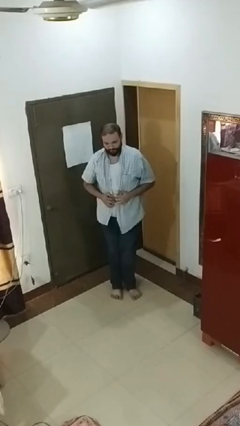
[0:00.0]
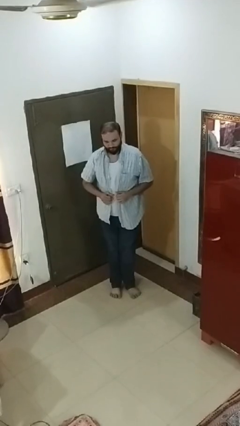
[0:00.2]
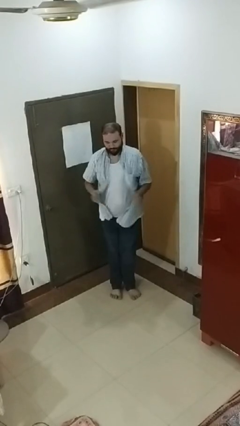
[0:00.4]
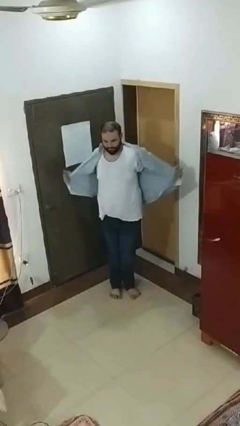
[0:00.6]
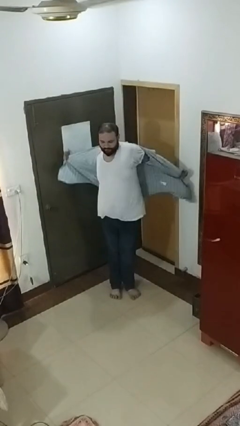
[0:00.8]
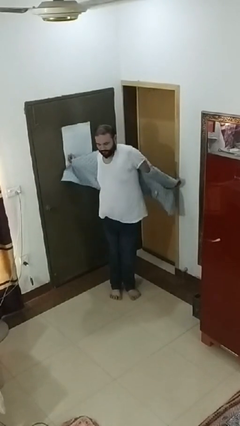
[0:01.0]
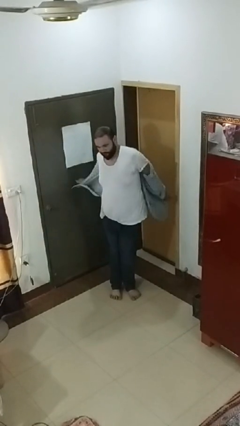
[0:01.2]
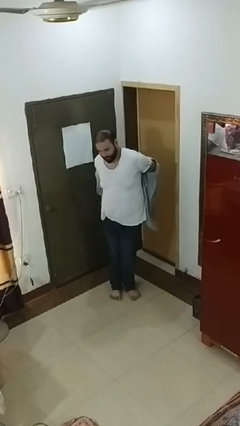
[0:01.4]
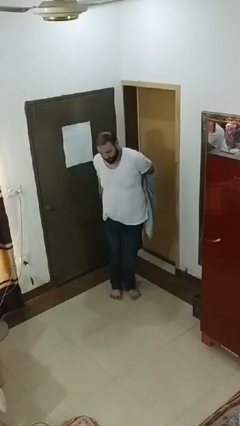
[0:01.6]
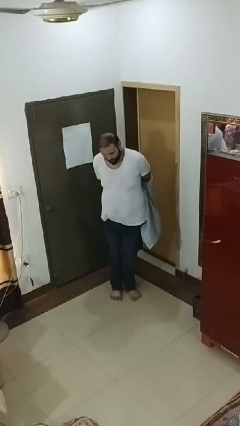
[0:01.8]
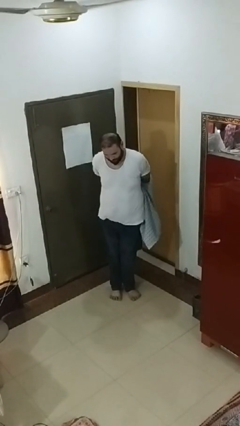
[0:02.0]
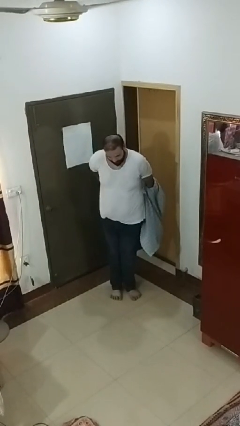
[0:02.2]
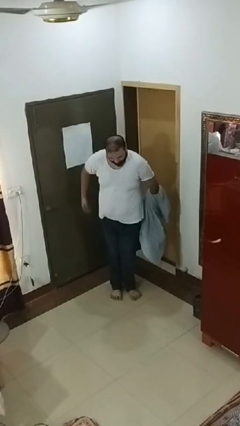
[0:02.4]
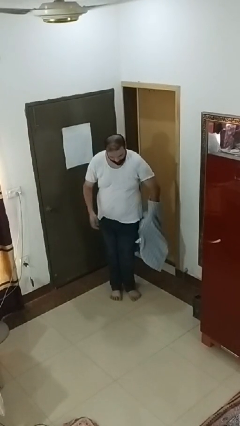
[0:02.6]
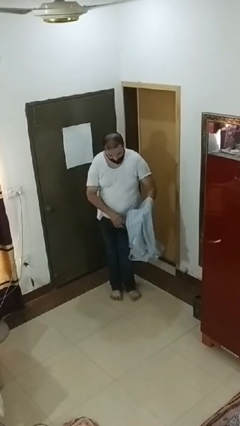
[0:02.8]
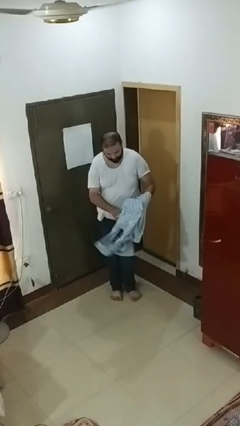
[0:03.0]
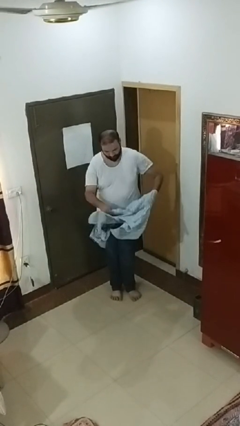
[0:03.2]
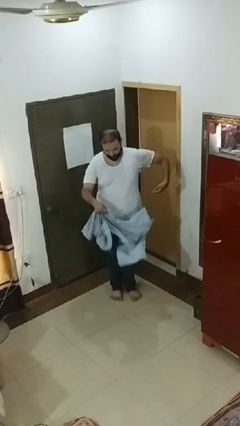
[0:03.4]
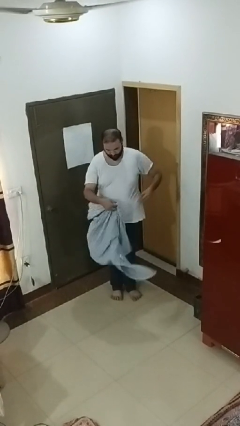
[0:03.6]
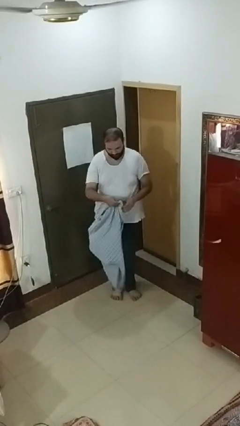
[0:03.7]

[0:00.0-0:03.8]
person takes off shirt

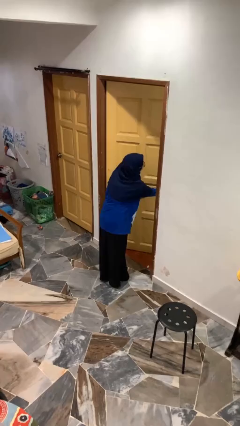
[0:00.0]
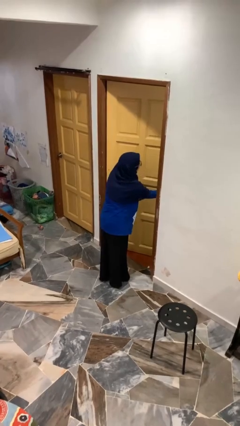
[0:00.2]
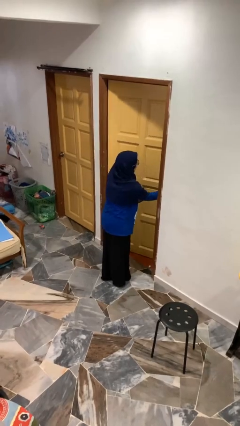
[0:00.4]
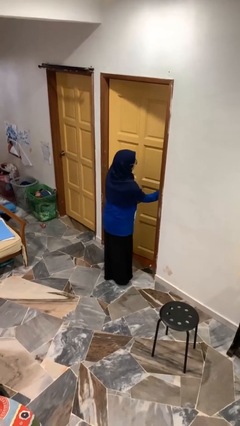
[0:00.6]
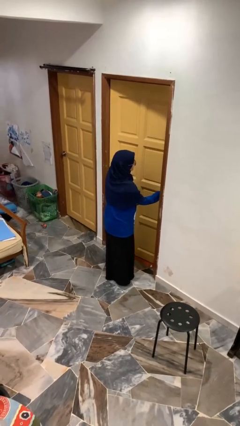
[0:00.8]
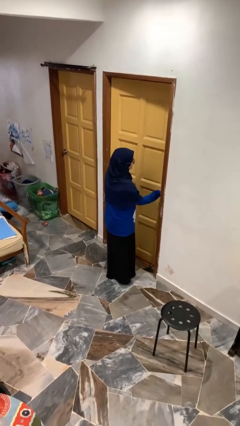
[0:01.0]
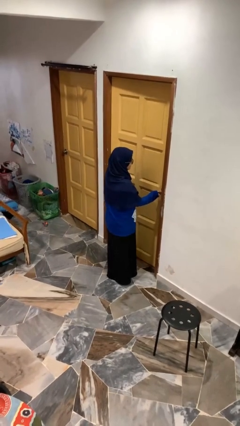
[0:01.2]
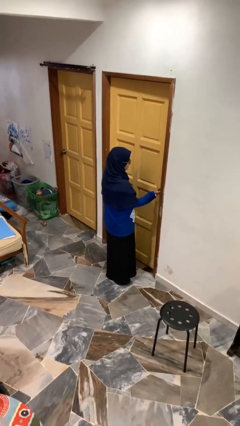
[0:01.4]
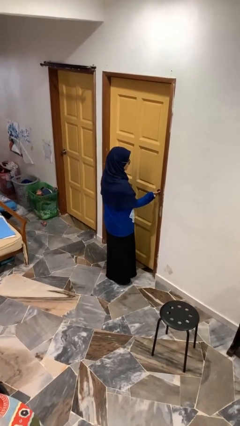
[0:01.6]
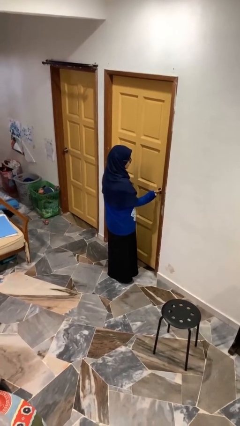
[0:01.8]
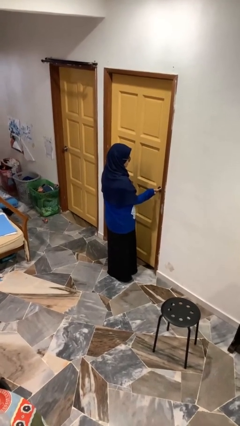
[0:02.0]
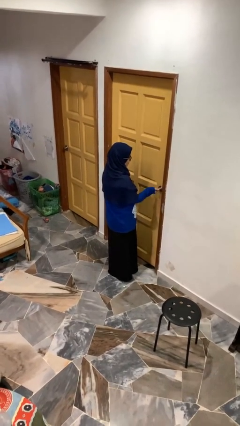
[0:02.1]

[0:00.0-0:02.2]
person closes facility door

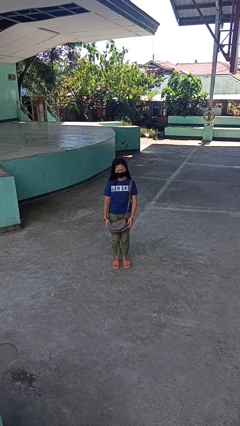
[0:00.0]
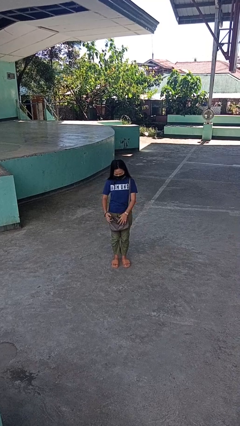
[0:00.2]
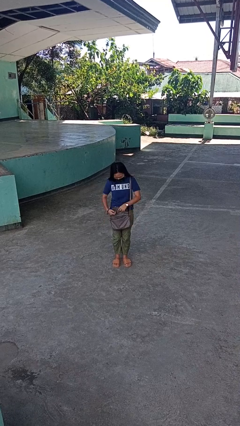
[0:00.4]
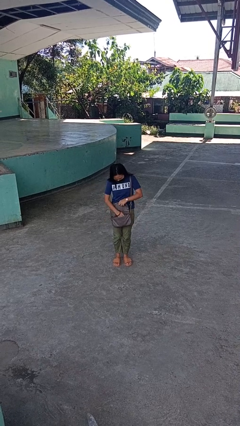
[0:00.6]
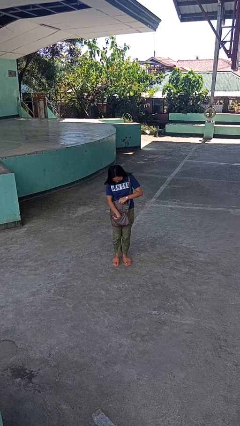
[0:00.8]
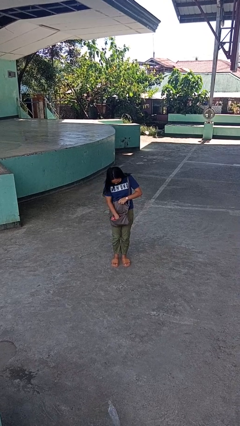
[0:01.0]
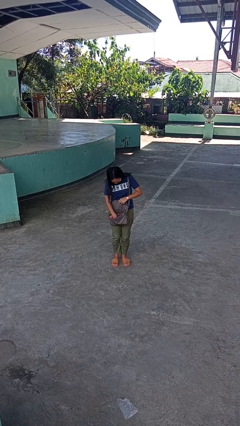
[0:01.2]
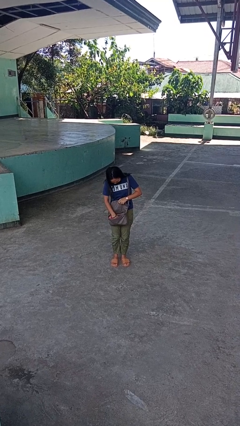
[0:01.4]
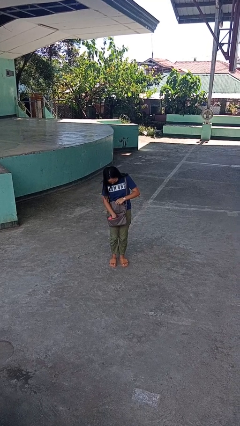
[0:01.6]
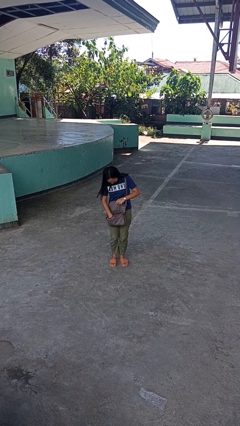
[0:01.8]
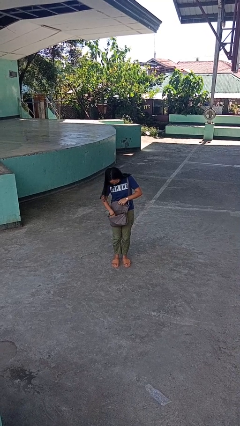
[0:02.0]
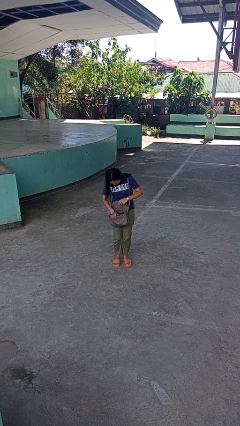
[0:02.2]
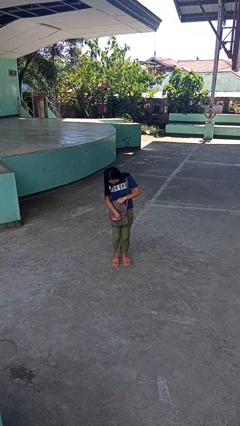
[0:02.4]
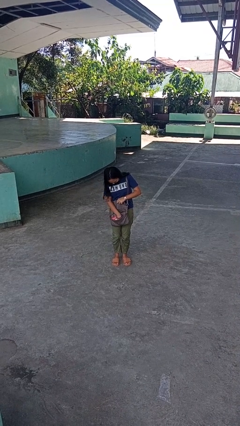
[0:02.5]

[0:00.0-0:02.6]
person searches in purse

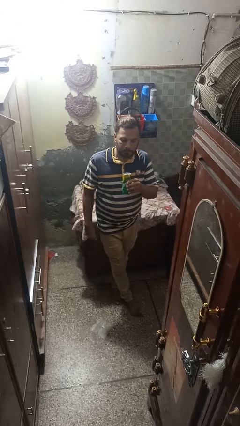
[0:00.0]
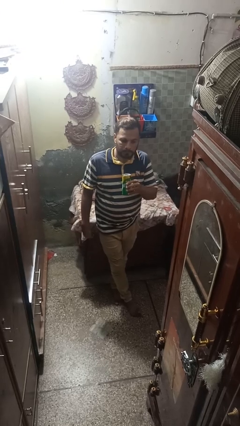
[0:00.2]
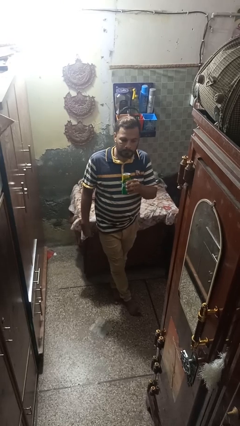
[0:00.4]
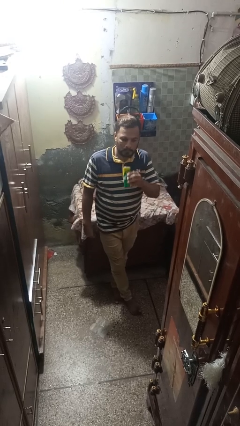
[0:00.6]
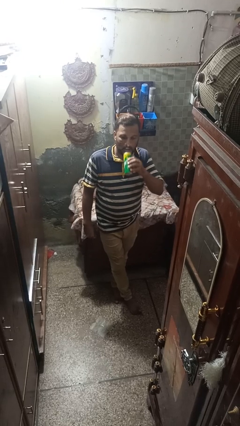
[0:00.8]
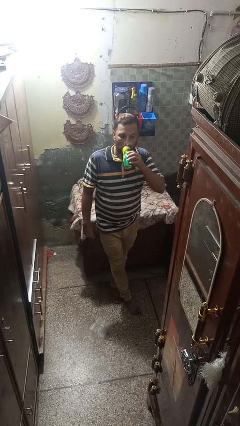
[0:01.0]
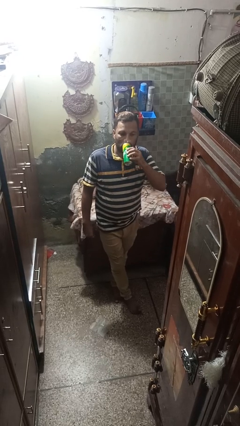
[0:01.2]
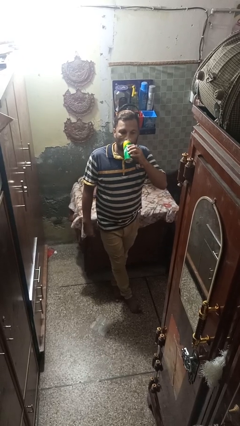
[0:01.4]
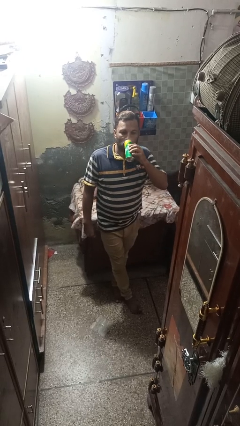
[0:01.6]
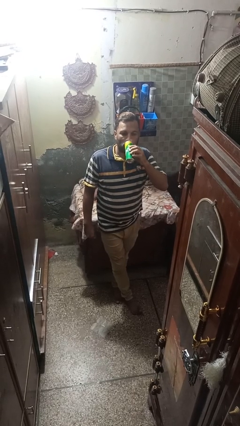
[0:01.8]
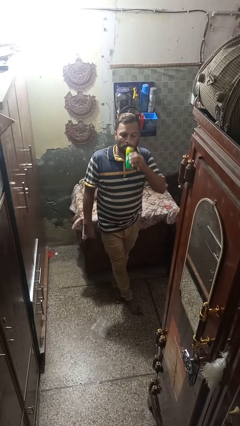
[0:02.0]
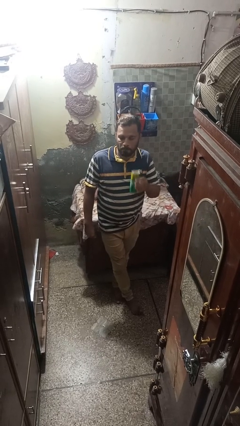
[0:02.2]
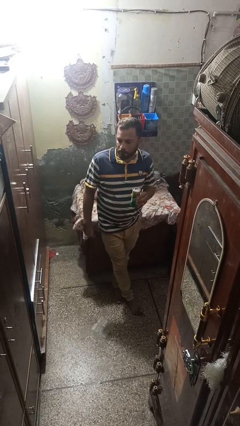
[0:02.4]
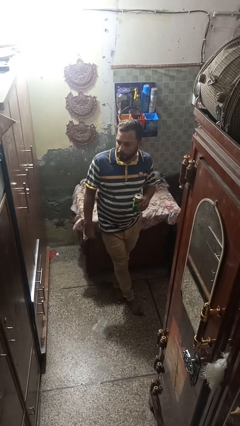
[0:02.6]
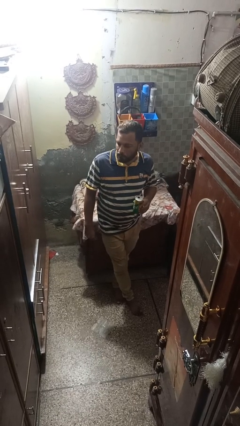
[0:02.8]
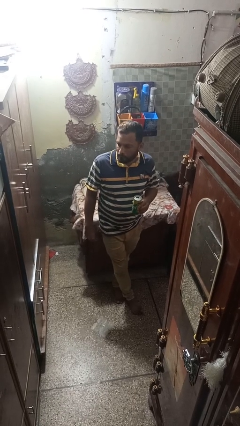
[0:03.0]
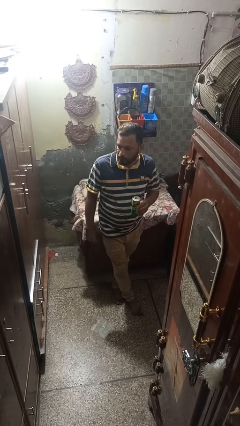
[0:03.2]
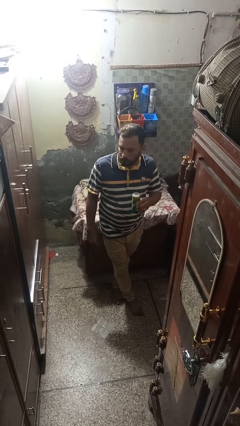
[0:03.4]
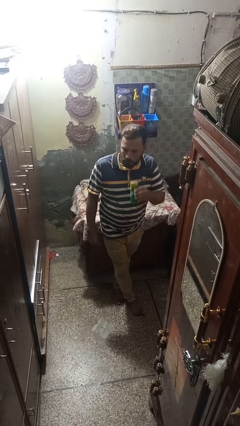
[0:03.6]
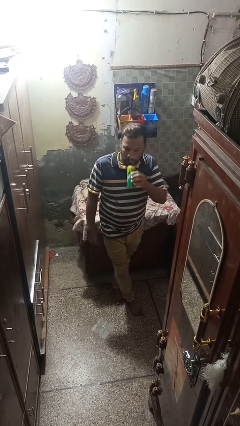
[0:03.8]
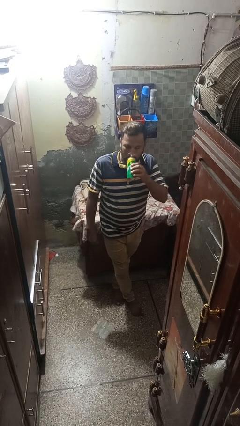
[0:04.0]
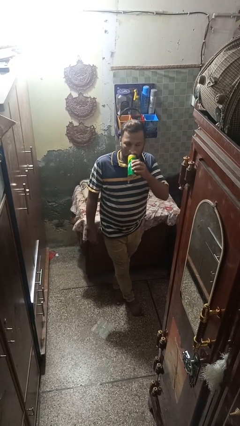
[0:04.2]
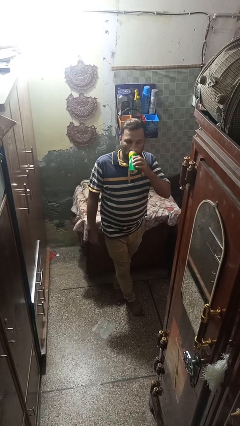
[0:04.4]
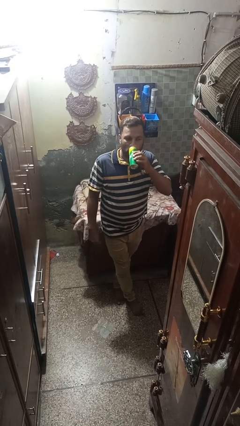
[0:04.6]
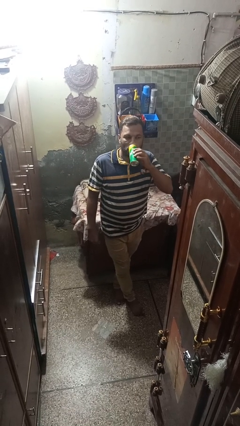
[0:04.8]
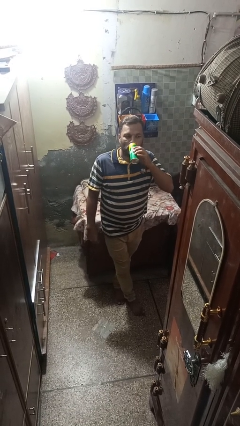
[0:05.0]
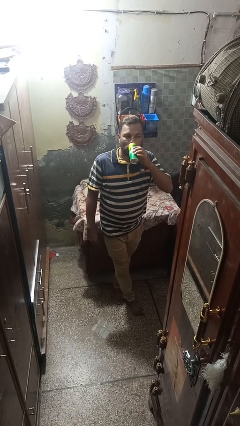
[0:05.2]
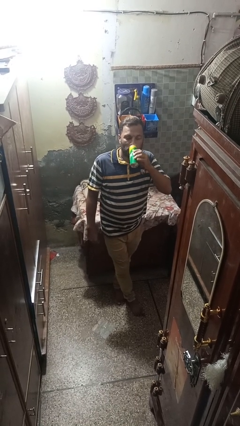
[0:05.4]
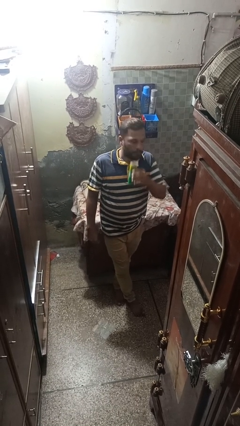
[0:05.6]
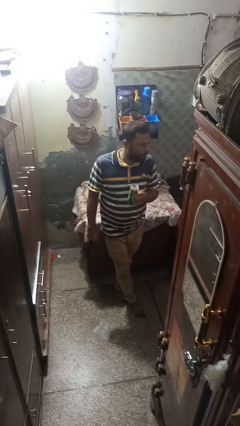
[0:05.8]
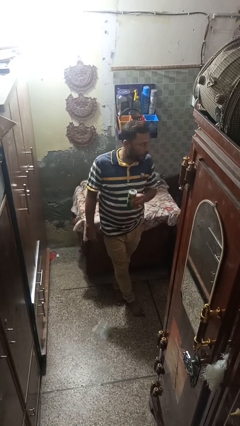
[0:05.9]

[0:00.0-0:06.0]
person drinks from beverage can

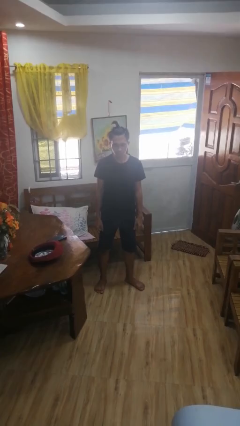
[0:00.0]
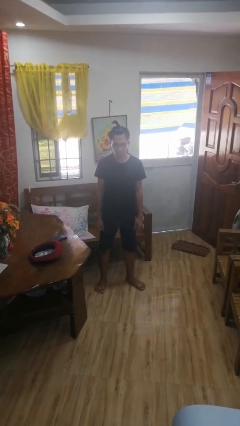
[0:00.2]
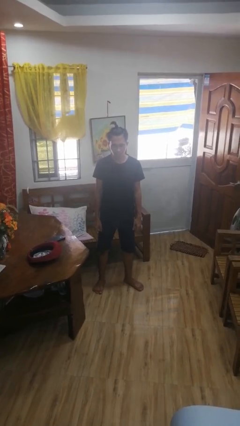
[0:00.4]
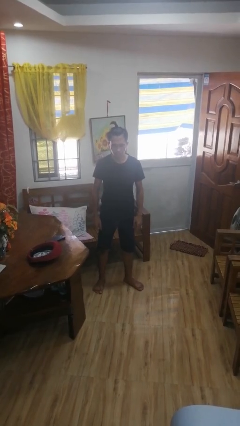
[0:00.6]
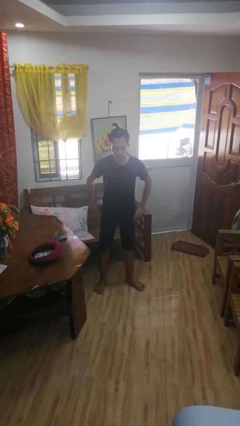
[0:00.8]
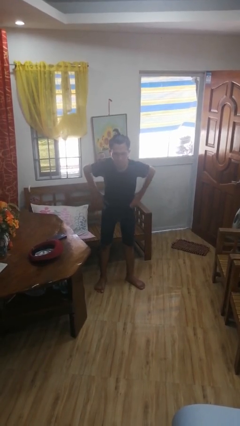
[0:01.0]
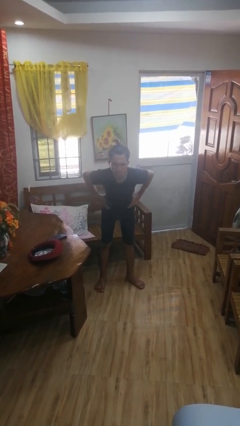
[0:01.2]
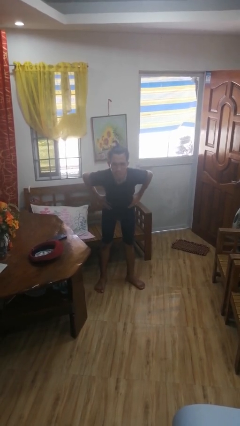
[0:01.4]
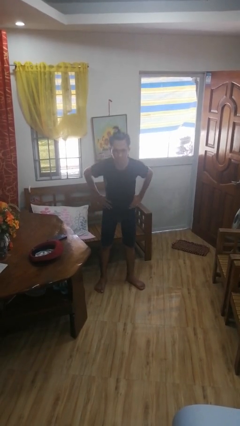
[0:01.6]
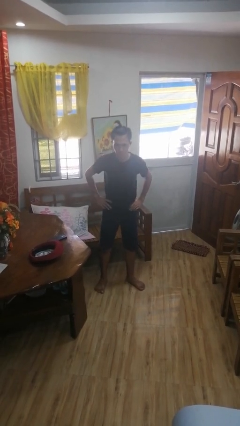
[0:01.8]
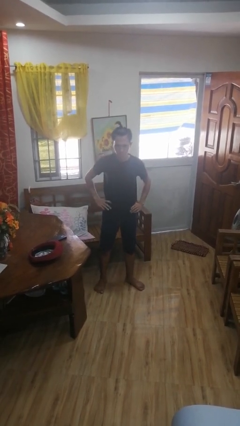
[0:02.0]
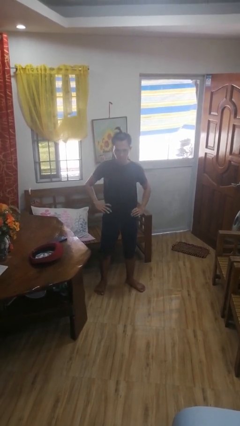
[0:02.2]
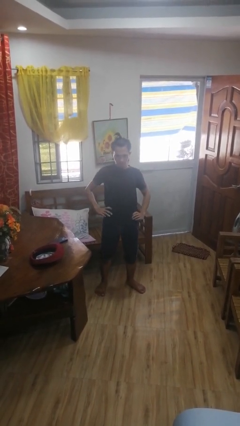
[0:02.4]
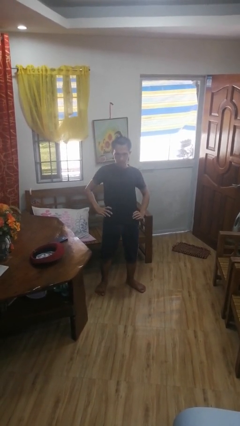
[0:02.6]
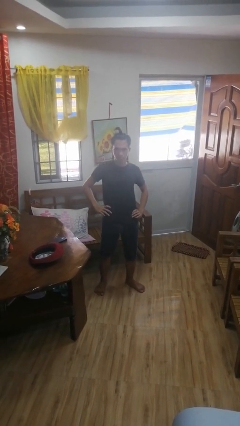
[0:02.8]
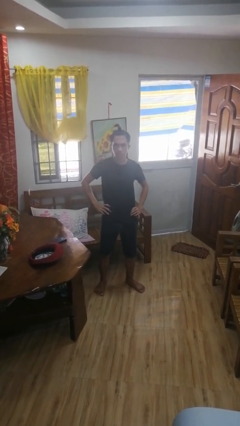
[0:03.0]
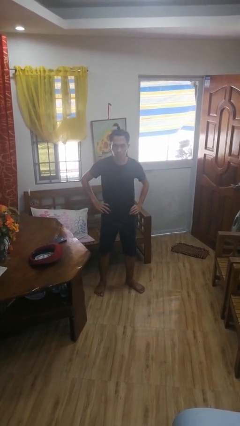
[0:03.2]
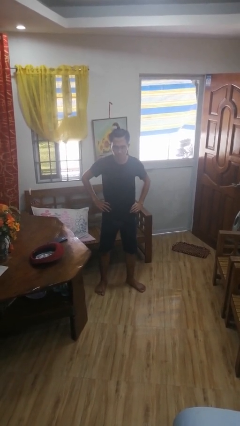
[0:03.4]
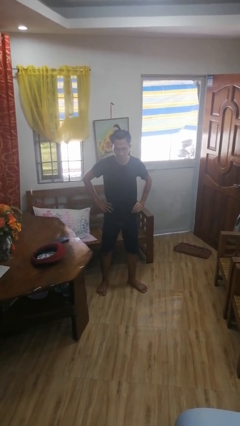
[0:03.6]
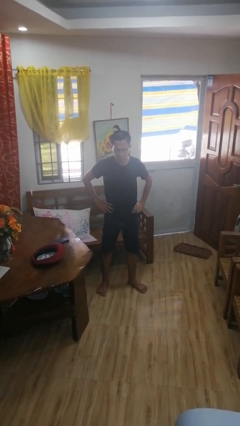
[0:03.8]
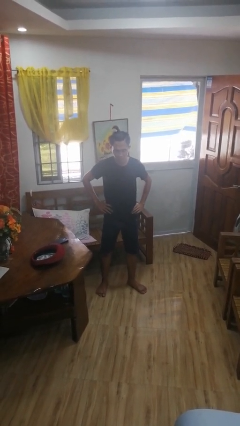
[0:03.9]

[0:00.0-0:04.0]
person wiggles hips
